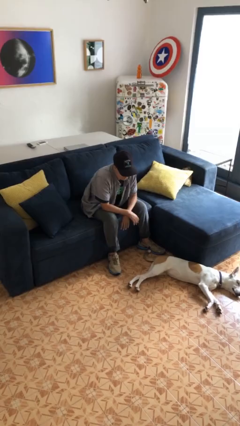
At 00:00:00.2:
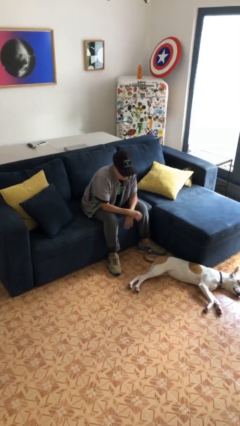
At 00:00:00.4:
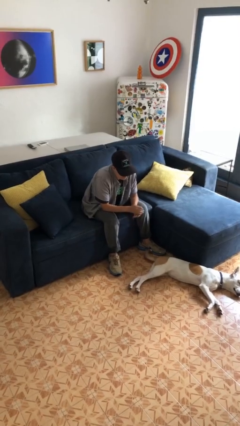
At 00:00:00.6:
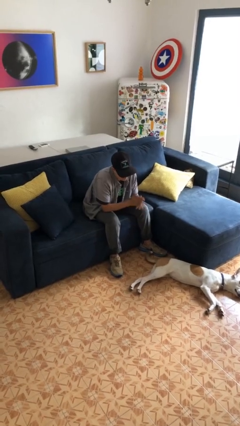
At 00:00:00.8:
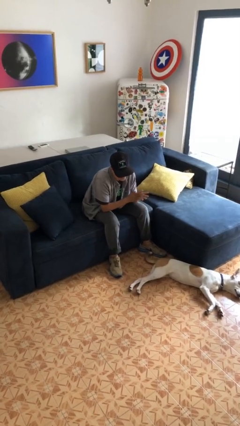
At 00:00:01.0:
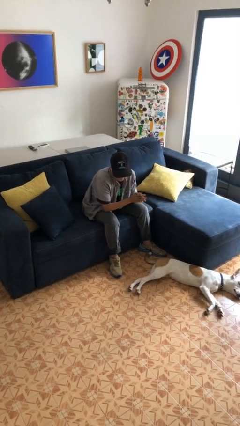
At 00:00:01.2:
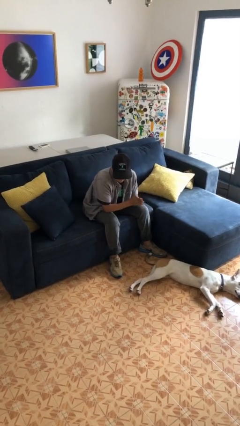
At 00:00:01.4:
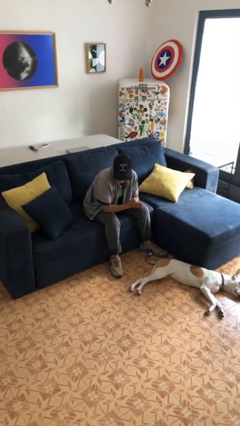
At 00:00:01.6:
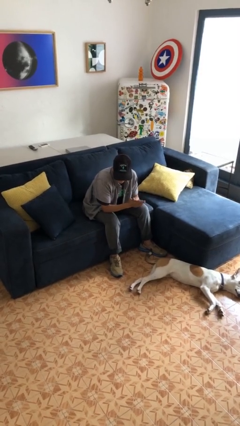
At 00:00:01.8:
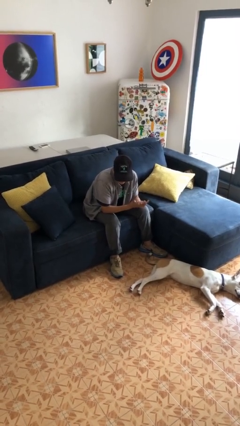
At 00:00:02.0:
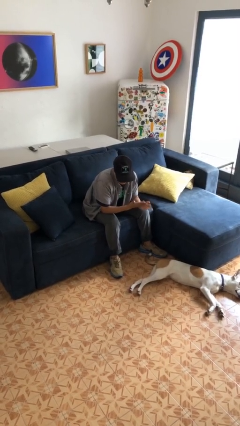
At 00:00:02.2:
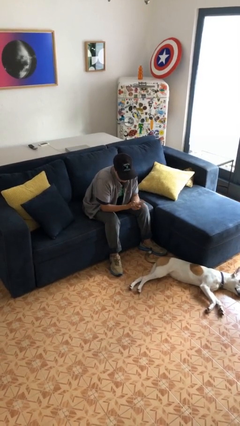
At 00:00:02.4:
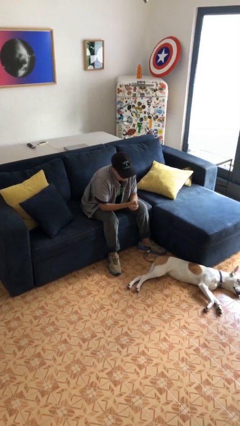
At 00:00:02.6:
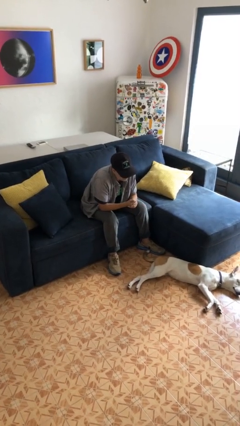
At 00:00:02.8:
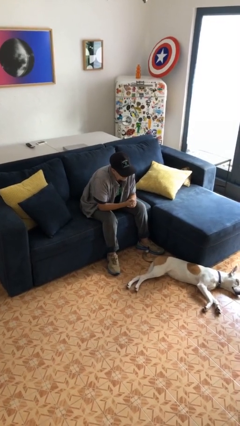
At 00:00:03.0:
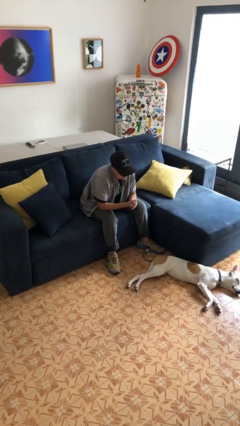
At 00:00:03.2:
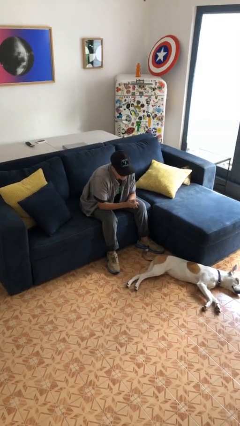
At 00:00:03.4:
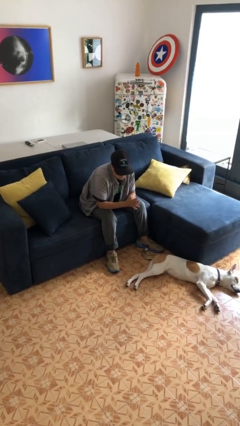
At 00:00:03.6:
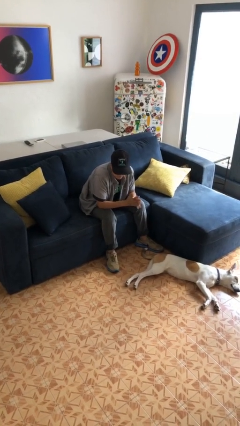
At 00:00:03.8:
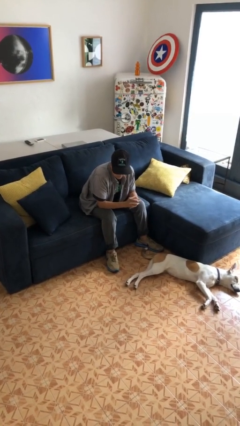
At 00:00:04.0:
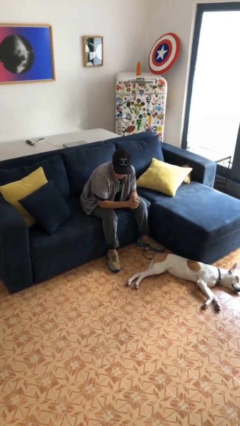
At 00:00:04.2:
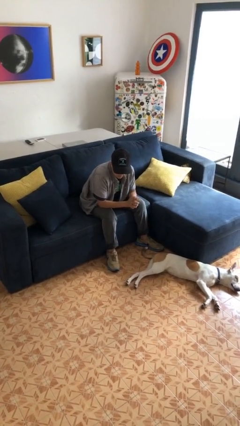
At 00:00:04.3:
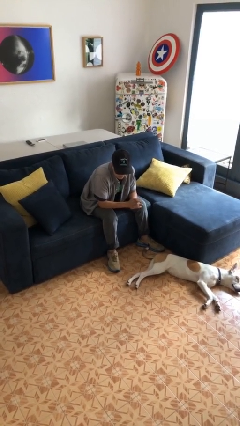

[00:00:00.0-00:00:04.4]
person looks at hands in lap

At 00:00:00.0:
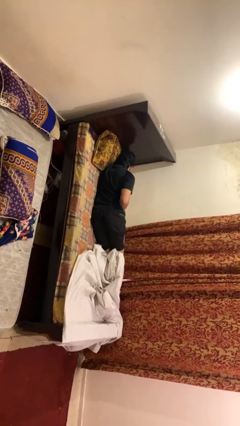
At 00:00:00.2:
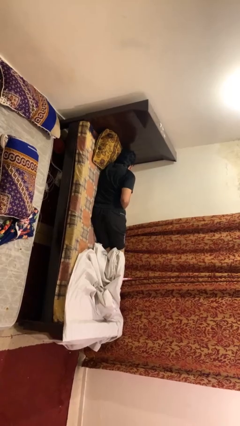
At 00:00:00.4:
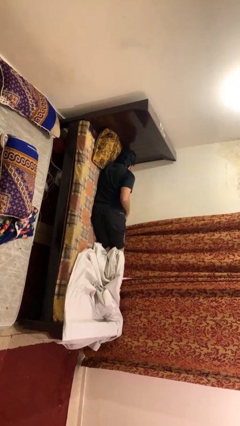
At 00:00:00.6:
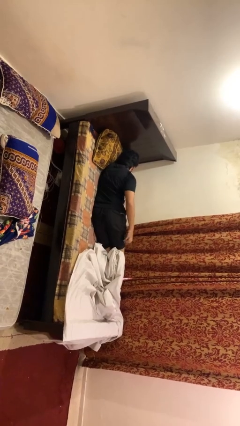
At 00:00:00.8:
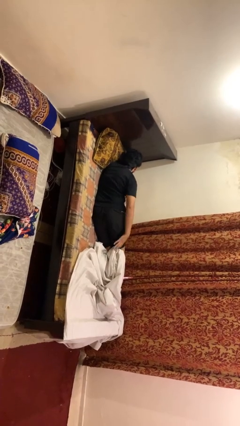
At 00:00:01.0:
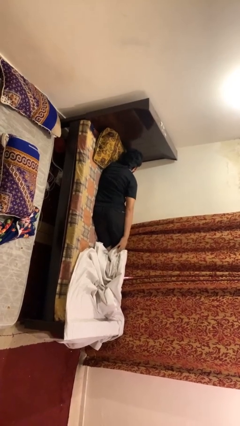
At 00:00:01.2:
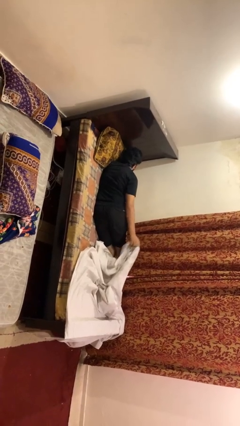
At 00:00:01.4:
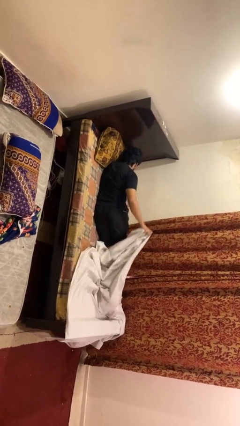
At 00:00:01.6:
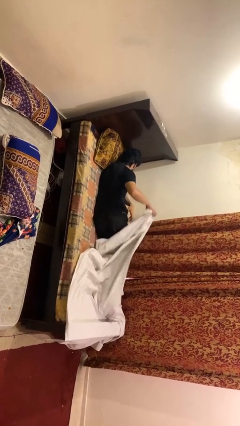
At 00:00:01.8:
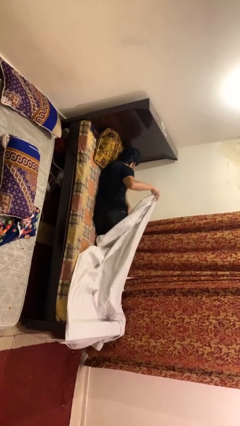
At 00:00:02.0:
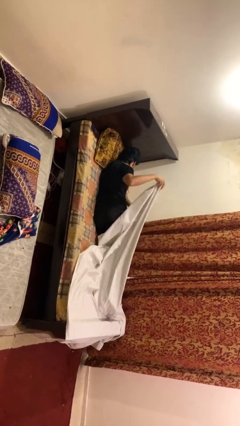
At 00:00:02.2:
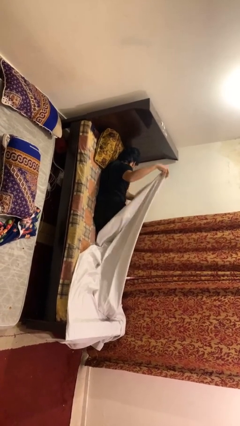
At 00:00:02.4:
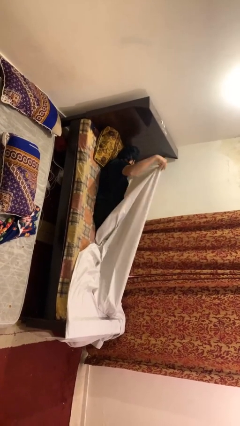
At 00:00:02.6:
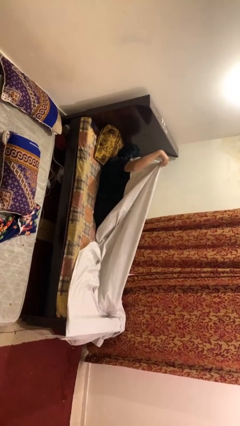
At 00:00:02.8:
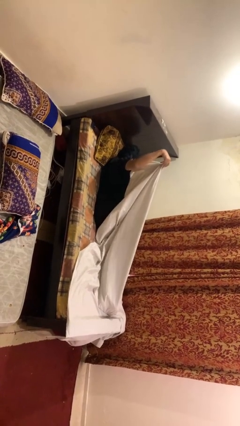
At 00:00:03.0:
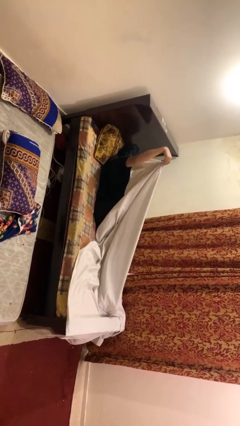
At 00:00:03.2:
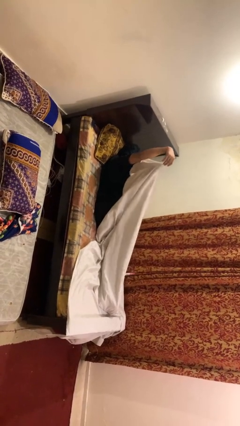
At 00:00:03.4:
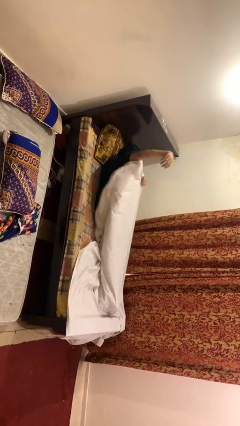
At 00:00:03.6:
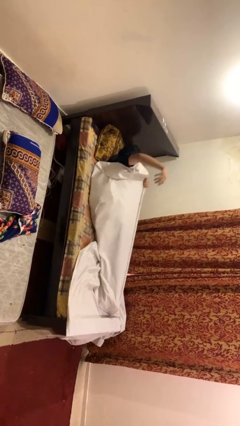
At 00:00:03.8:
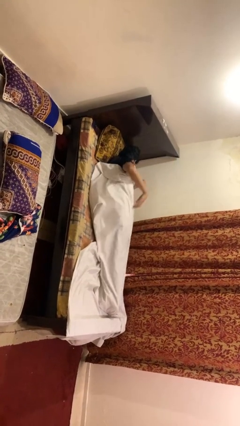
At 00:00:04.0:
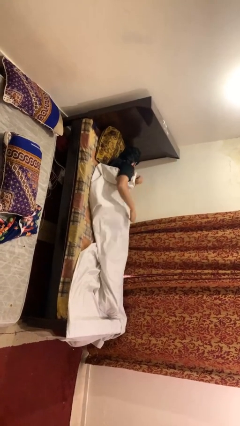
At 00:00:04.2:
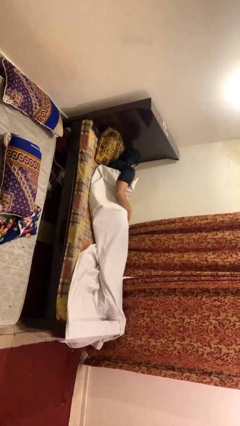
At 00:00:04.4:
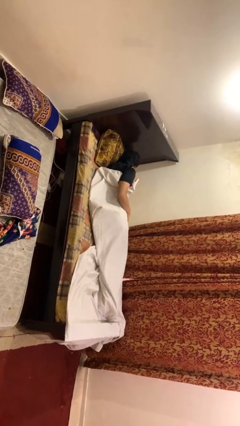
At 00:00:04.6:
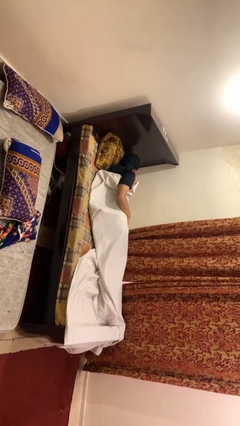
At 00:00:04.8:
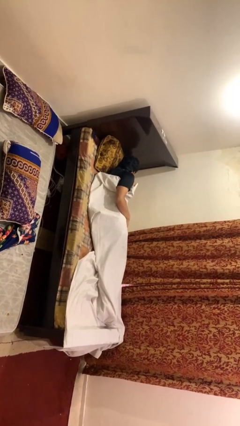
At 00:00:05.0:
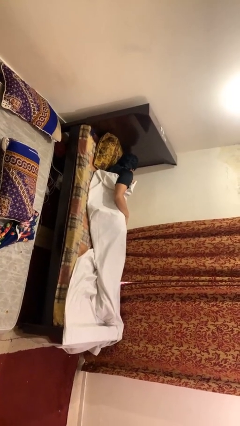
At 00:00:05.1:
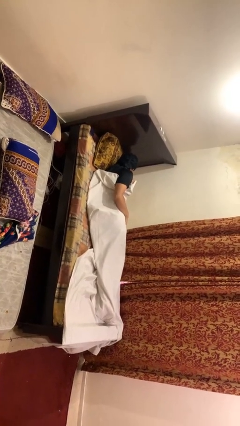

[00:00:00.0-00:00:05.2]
person covers with bedsheets

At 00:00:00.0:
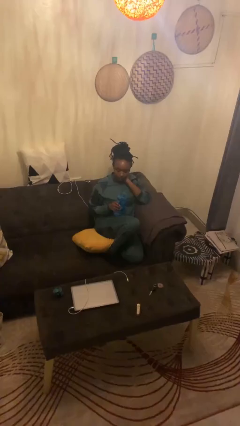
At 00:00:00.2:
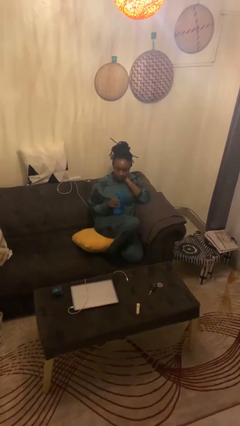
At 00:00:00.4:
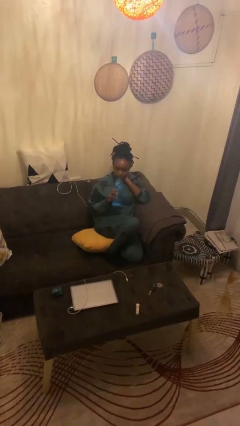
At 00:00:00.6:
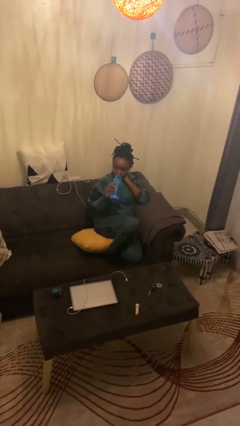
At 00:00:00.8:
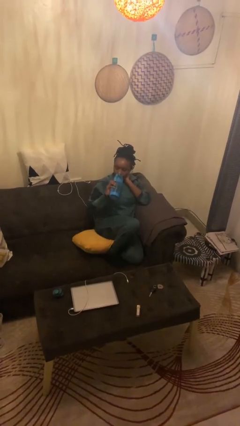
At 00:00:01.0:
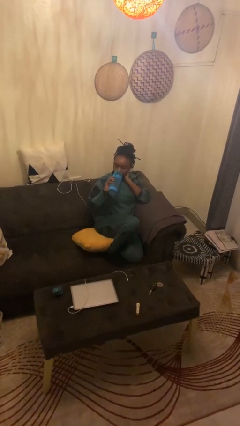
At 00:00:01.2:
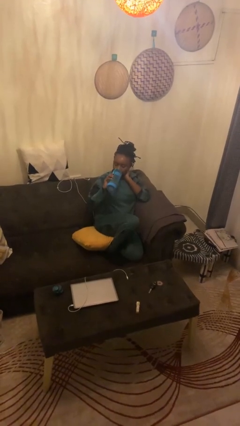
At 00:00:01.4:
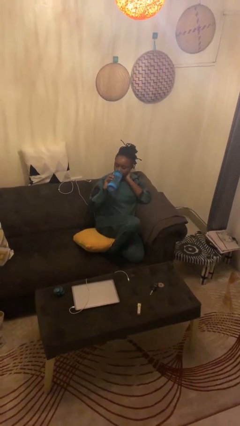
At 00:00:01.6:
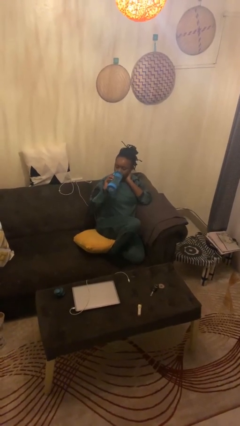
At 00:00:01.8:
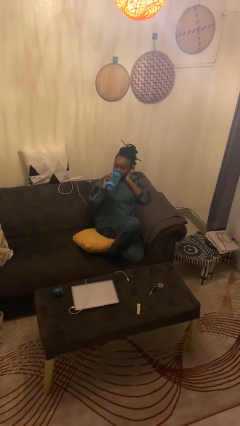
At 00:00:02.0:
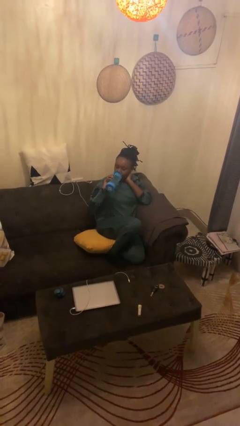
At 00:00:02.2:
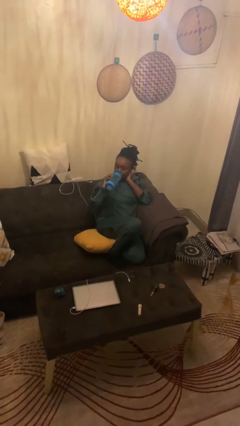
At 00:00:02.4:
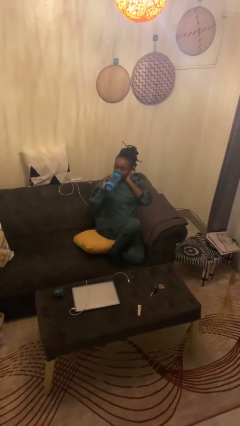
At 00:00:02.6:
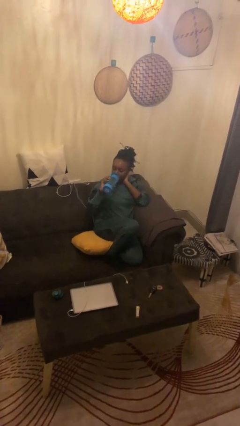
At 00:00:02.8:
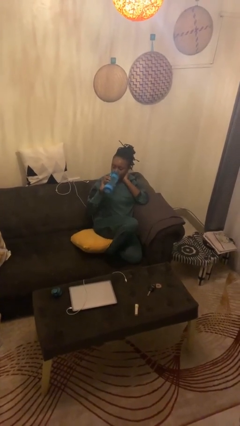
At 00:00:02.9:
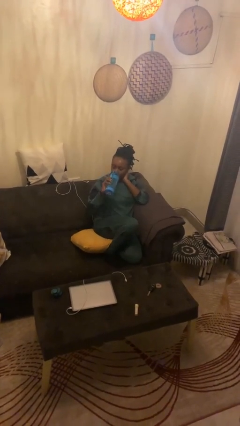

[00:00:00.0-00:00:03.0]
person drinks from bottle

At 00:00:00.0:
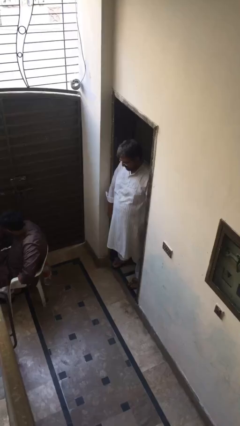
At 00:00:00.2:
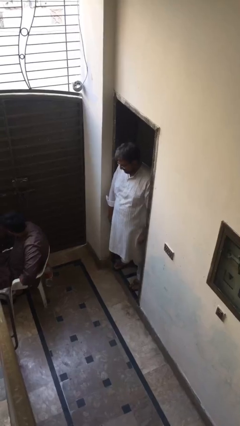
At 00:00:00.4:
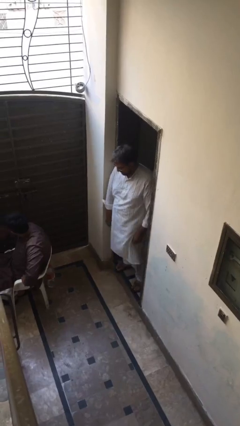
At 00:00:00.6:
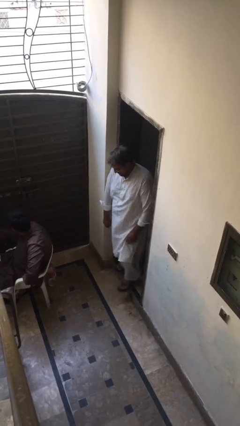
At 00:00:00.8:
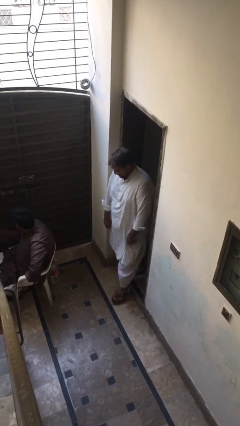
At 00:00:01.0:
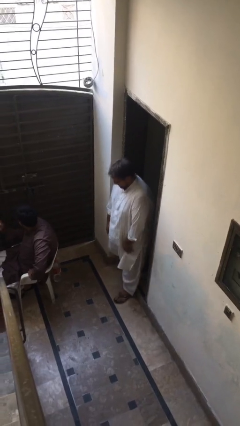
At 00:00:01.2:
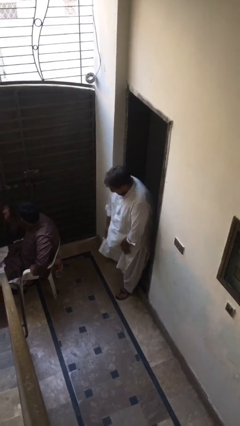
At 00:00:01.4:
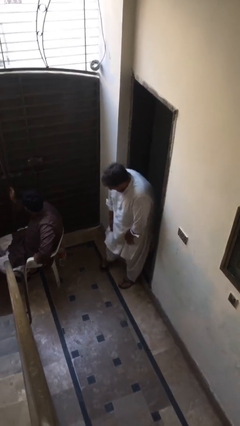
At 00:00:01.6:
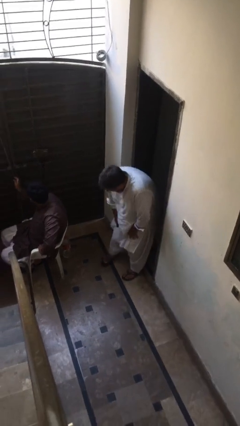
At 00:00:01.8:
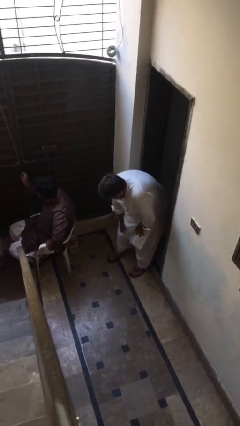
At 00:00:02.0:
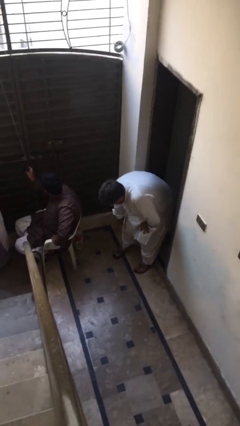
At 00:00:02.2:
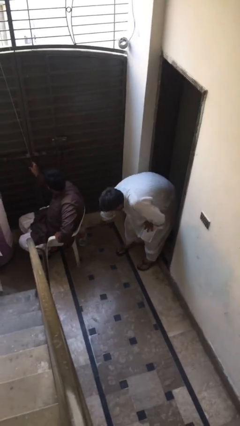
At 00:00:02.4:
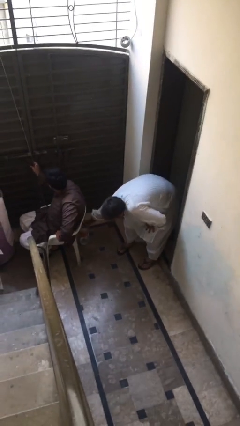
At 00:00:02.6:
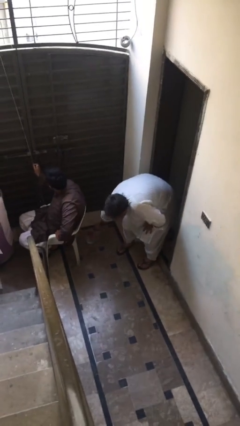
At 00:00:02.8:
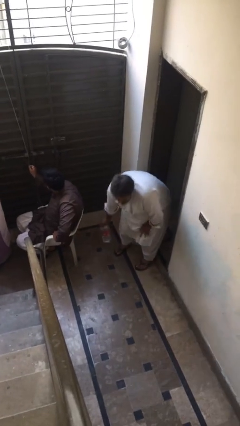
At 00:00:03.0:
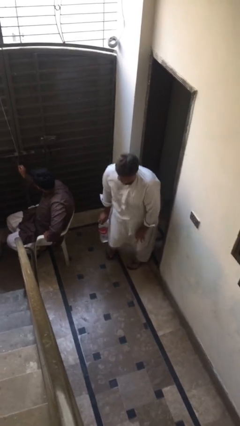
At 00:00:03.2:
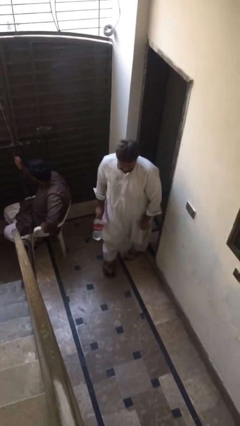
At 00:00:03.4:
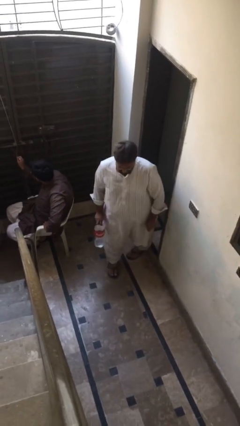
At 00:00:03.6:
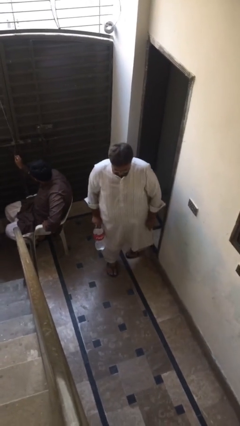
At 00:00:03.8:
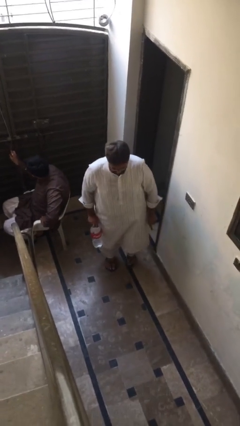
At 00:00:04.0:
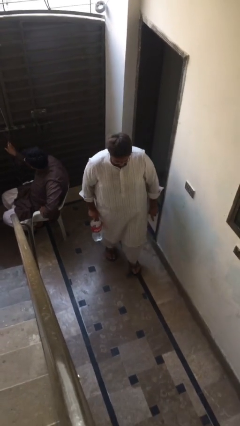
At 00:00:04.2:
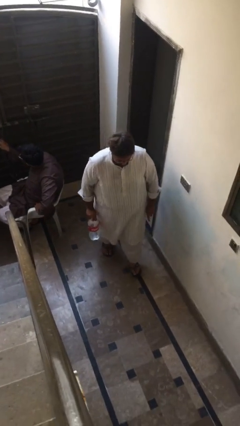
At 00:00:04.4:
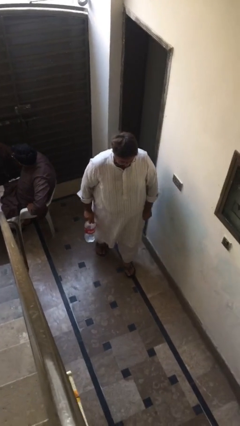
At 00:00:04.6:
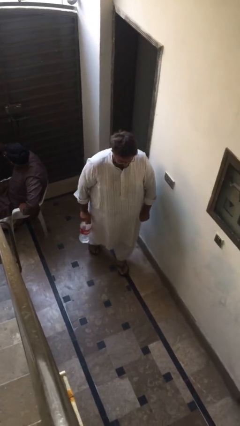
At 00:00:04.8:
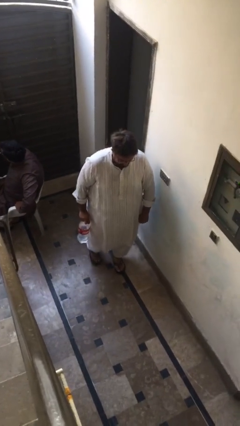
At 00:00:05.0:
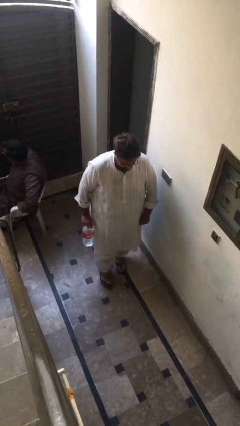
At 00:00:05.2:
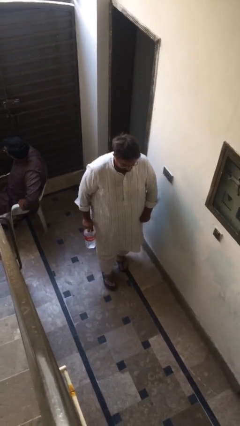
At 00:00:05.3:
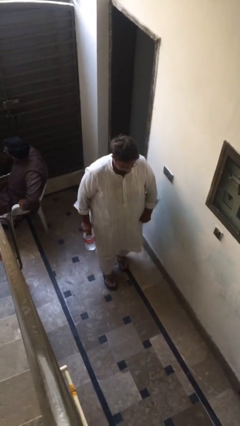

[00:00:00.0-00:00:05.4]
person steals object from person
